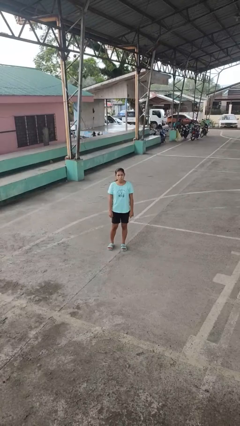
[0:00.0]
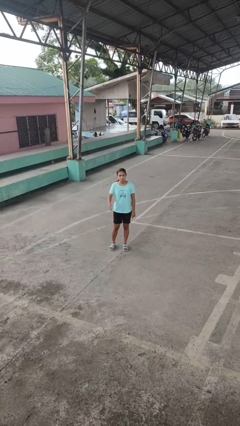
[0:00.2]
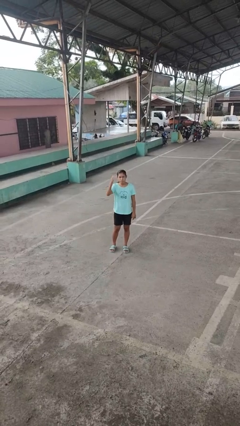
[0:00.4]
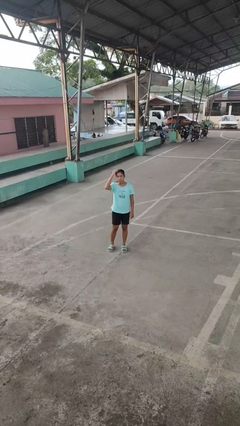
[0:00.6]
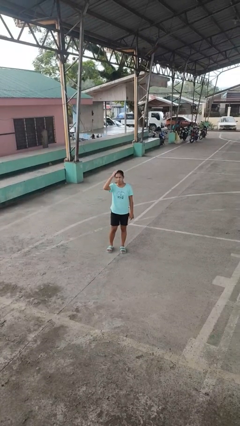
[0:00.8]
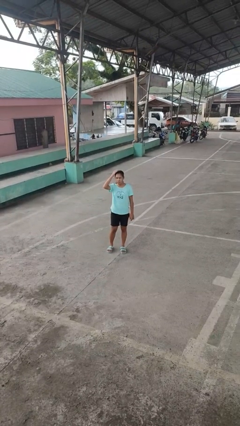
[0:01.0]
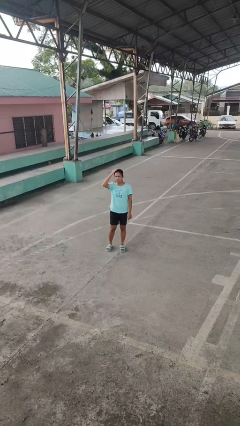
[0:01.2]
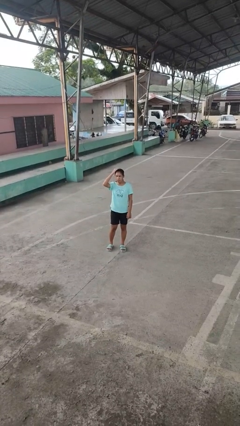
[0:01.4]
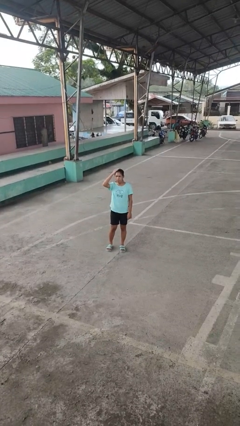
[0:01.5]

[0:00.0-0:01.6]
person pats head

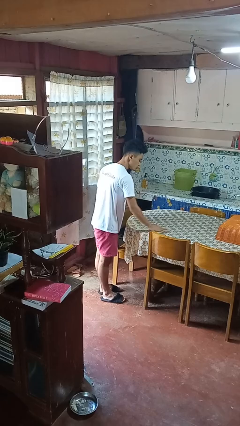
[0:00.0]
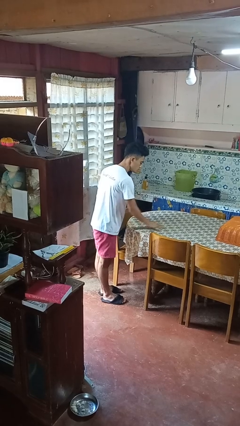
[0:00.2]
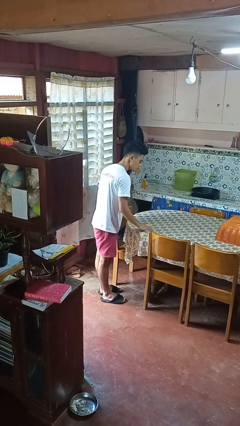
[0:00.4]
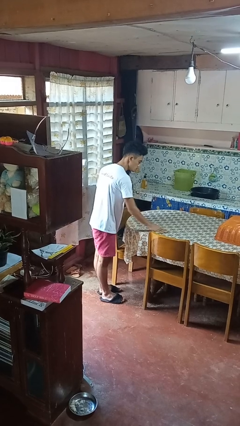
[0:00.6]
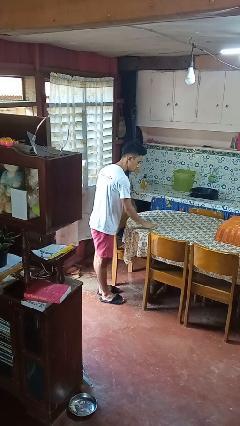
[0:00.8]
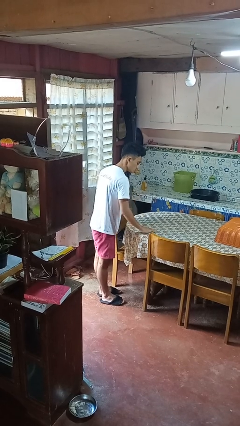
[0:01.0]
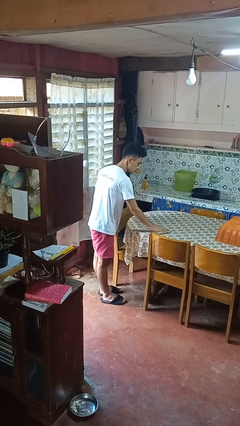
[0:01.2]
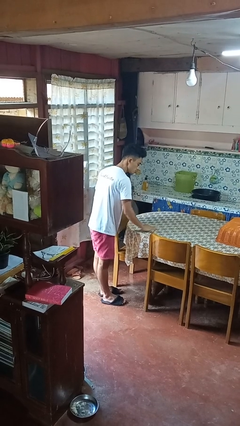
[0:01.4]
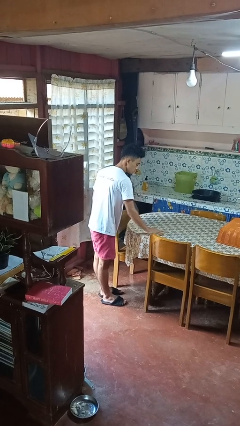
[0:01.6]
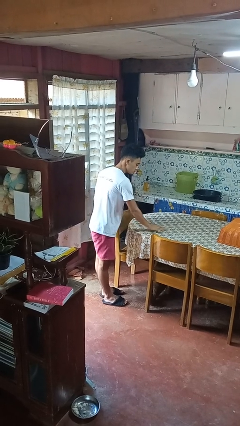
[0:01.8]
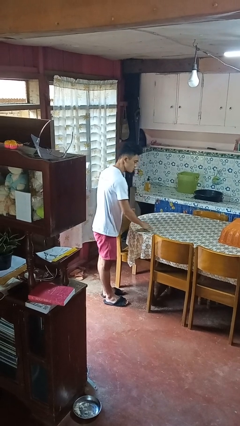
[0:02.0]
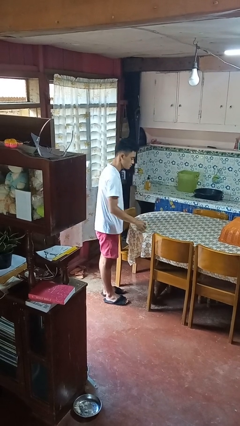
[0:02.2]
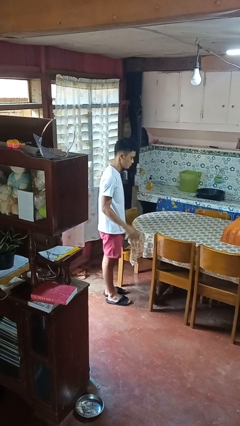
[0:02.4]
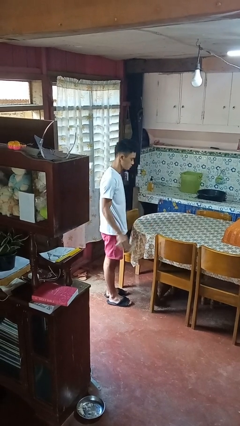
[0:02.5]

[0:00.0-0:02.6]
person cleans table with rag

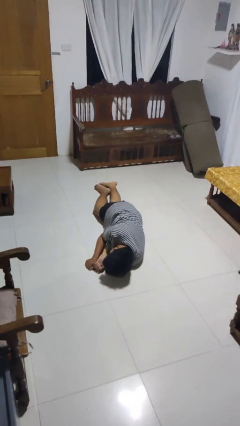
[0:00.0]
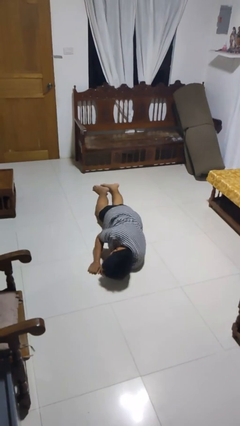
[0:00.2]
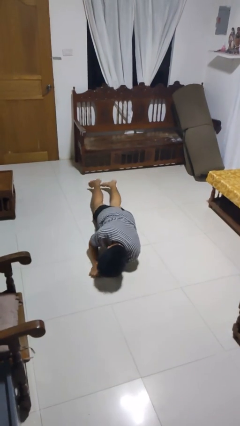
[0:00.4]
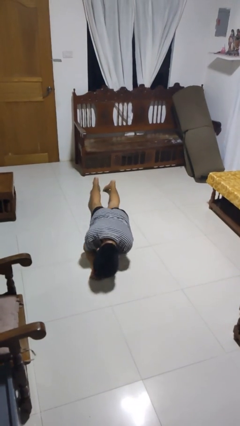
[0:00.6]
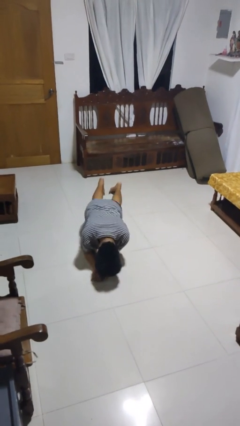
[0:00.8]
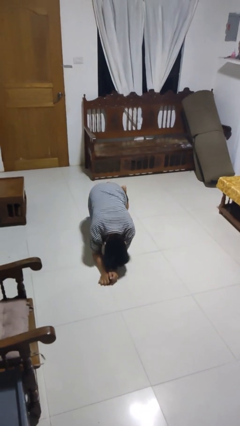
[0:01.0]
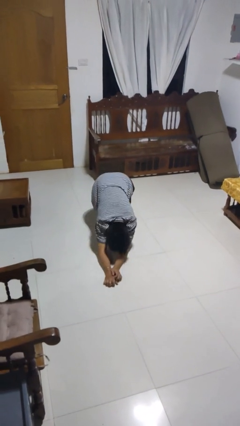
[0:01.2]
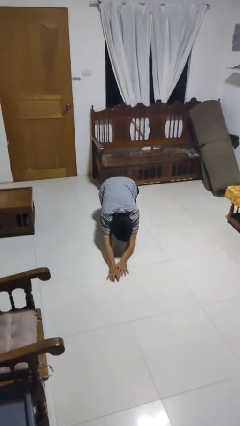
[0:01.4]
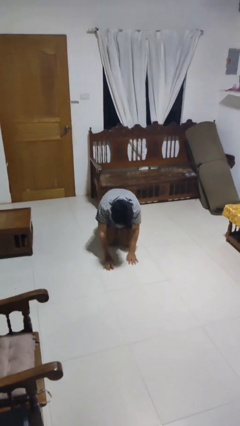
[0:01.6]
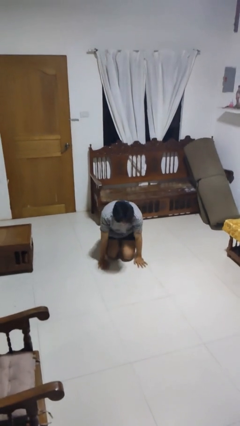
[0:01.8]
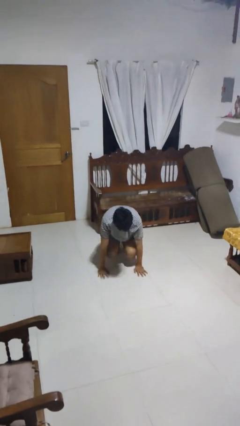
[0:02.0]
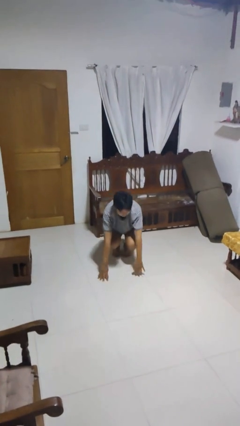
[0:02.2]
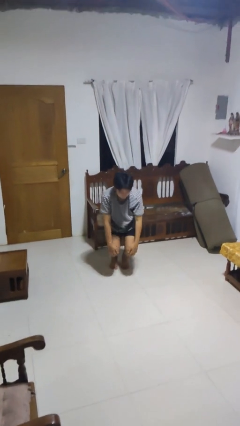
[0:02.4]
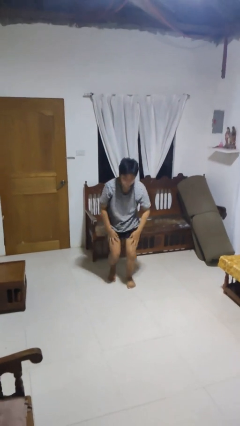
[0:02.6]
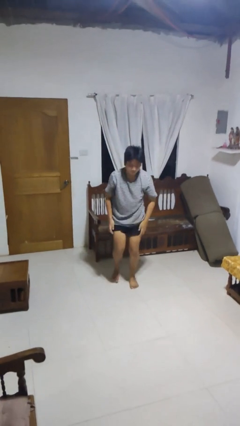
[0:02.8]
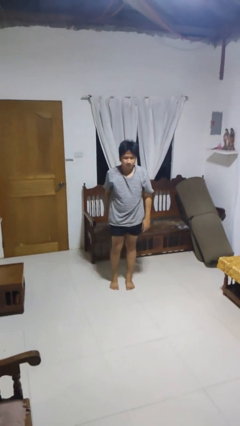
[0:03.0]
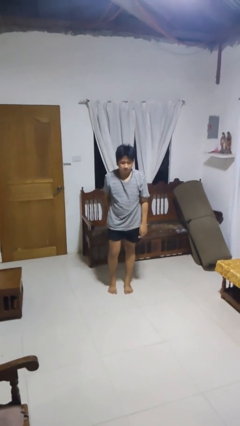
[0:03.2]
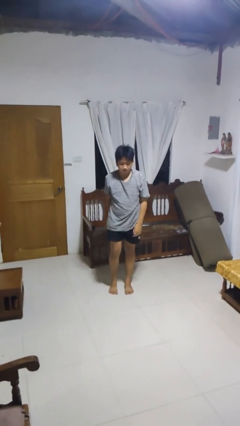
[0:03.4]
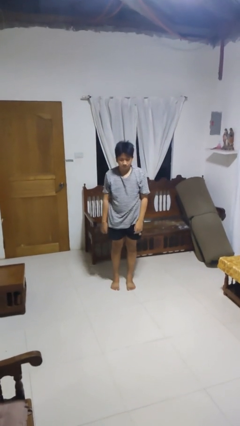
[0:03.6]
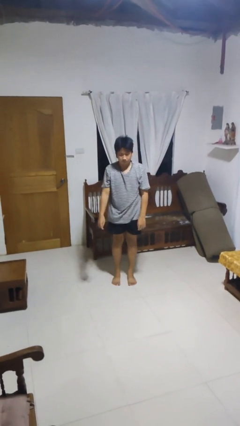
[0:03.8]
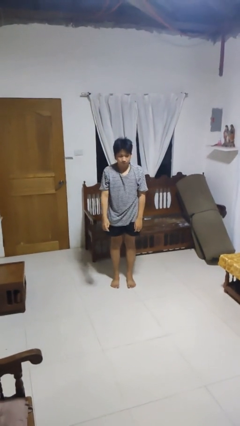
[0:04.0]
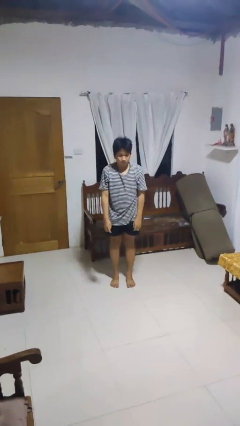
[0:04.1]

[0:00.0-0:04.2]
person stands up from floor

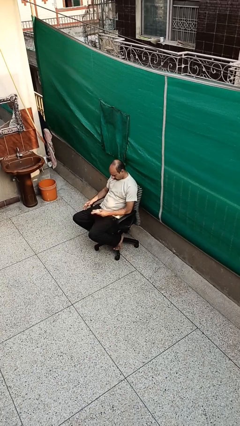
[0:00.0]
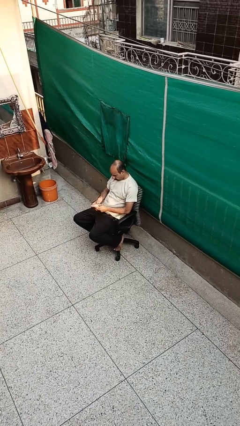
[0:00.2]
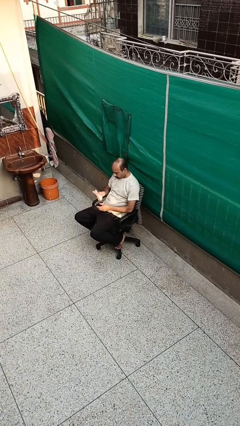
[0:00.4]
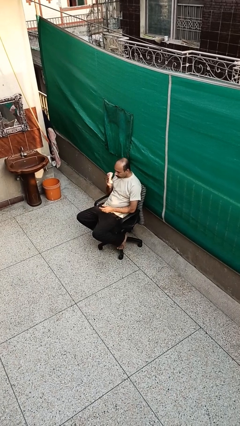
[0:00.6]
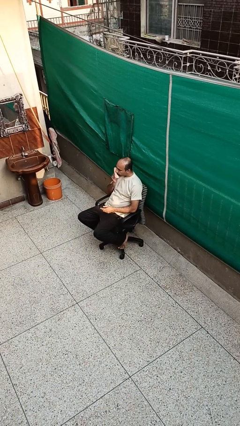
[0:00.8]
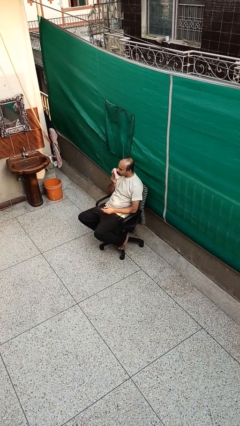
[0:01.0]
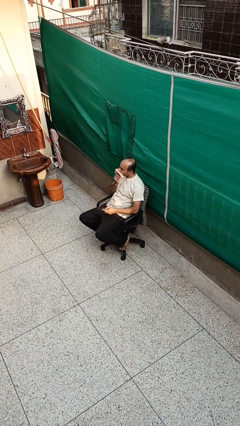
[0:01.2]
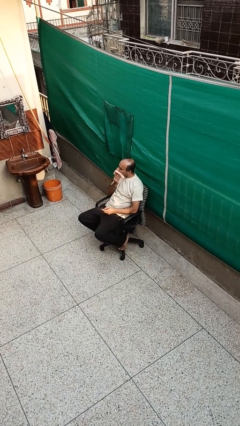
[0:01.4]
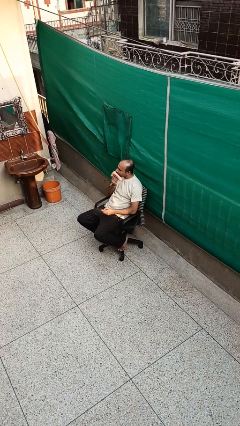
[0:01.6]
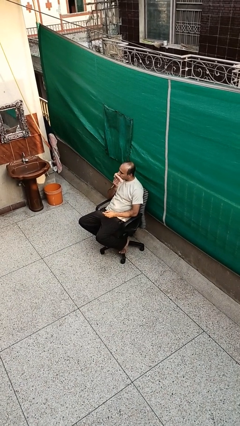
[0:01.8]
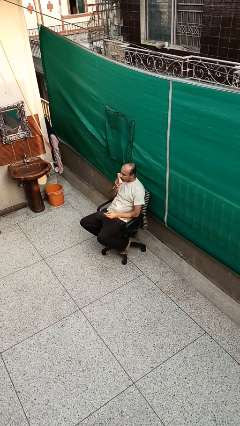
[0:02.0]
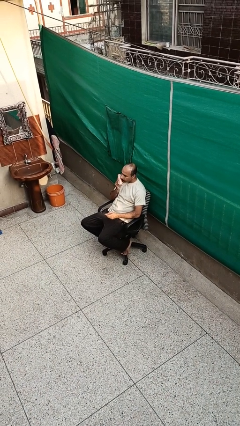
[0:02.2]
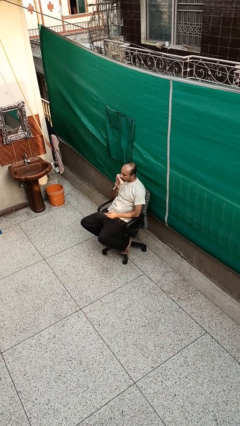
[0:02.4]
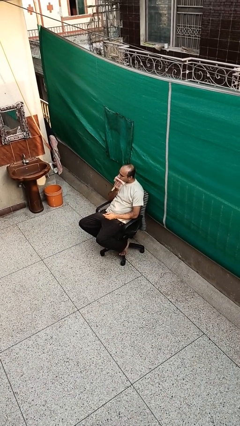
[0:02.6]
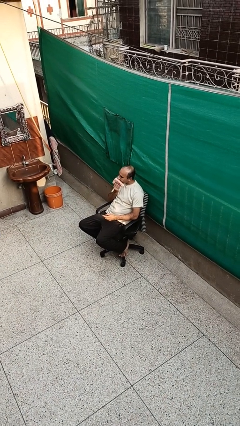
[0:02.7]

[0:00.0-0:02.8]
person wipes mouth with napkin

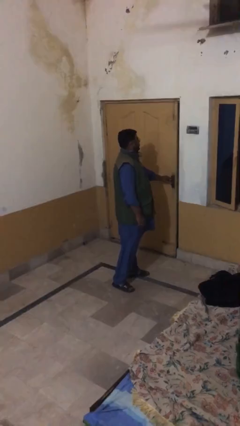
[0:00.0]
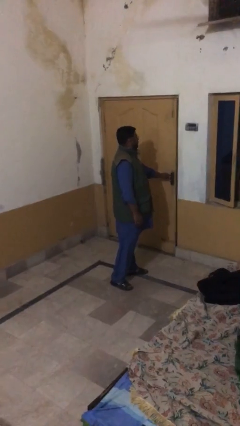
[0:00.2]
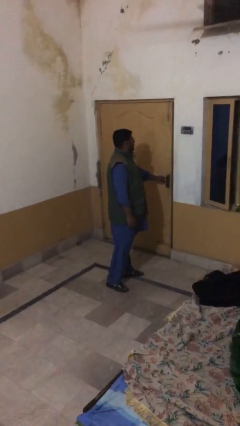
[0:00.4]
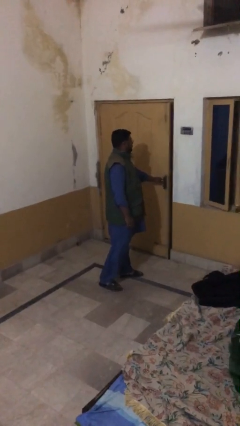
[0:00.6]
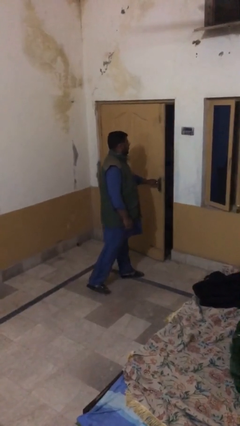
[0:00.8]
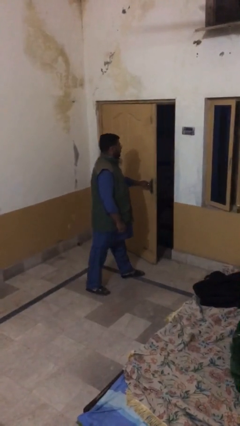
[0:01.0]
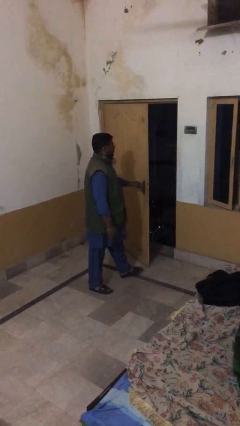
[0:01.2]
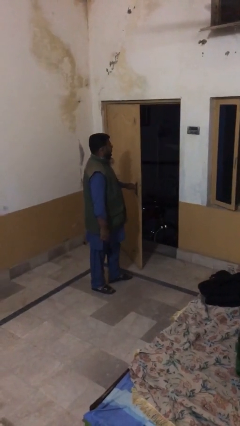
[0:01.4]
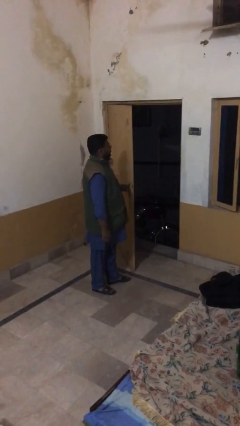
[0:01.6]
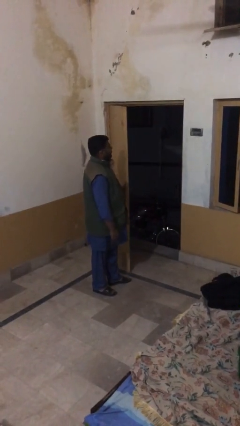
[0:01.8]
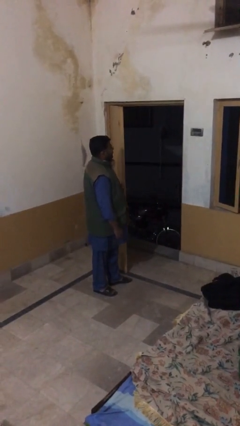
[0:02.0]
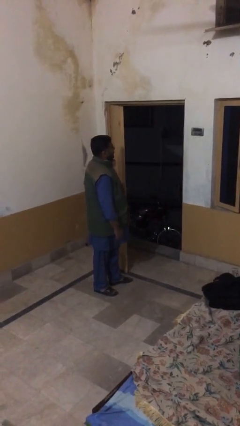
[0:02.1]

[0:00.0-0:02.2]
person opens facility door

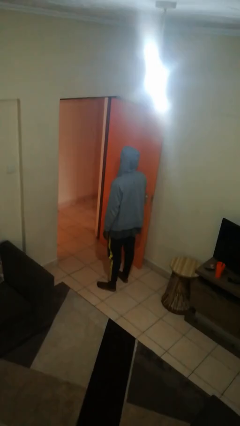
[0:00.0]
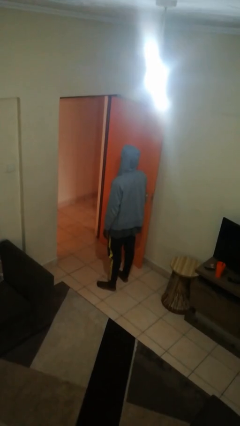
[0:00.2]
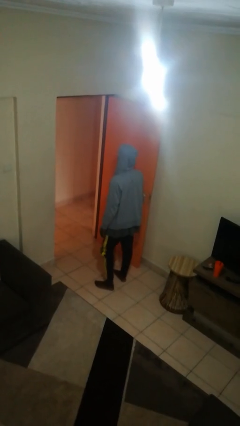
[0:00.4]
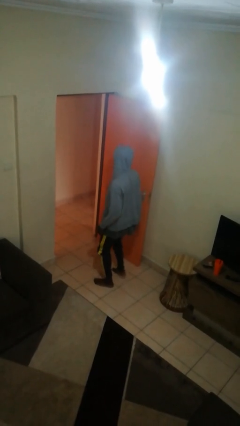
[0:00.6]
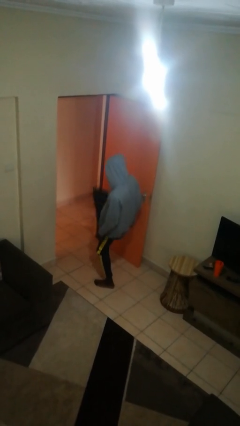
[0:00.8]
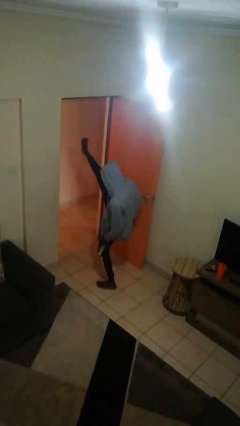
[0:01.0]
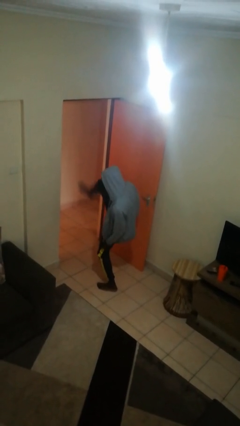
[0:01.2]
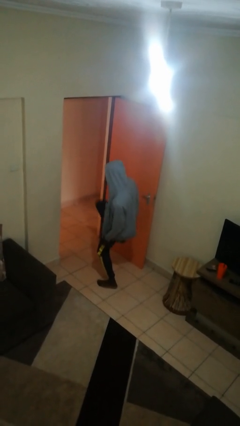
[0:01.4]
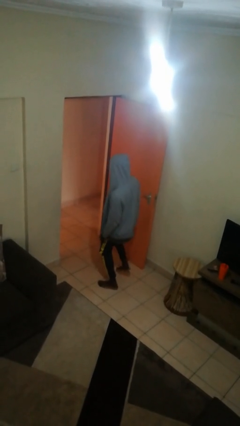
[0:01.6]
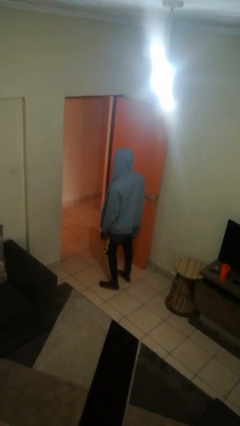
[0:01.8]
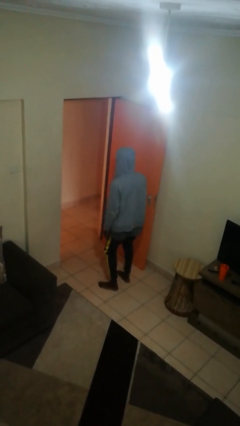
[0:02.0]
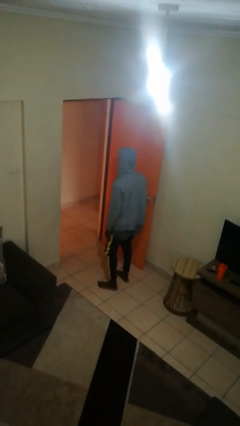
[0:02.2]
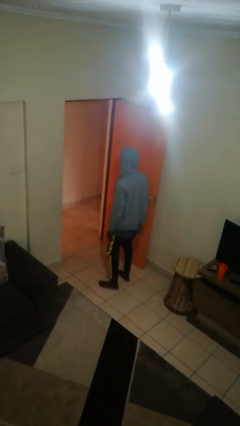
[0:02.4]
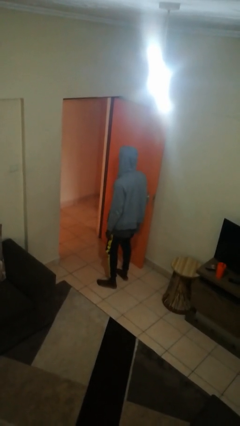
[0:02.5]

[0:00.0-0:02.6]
person karate kicks

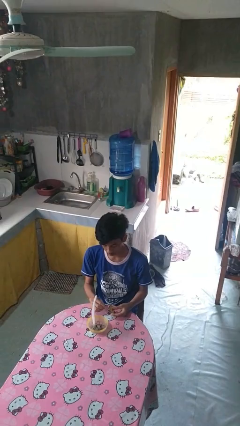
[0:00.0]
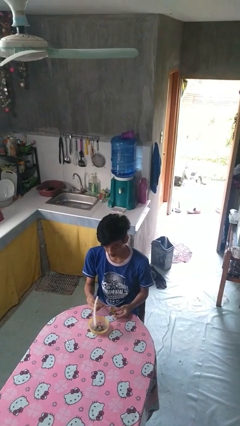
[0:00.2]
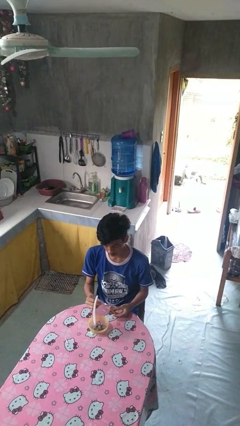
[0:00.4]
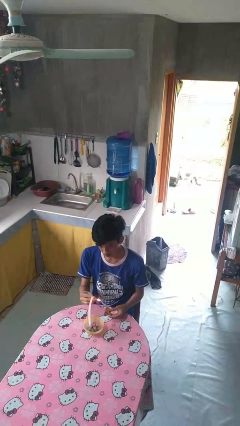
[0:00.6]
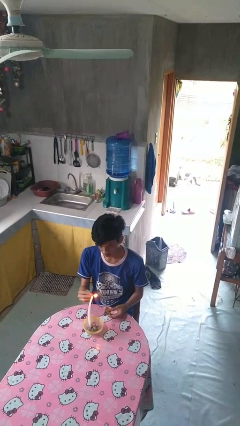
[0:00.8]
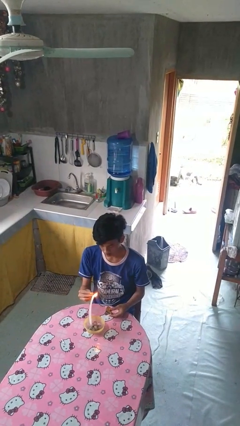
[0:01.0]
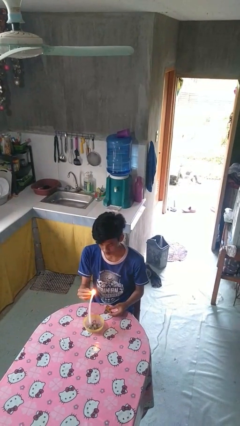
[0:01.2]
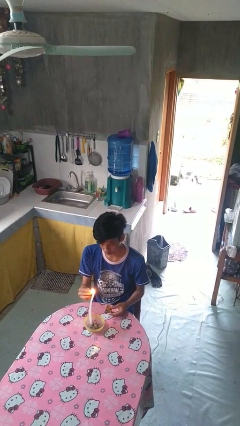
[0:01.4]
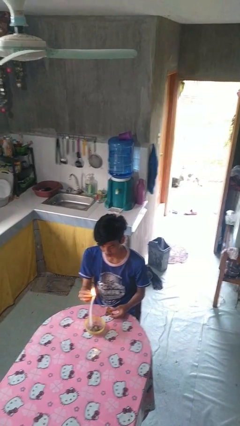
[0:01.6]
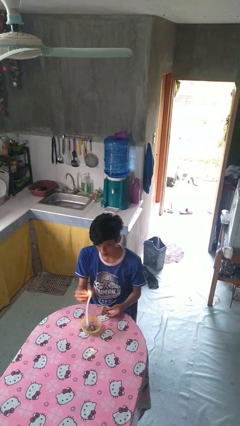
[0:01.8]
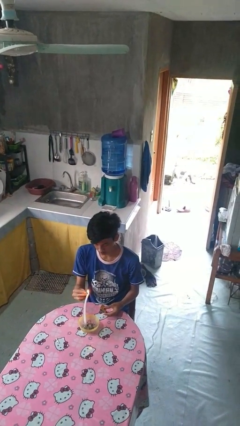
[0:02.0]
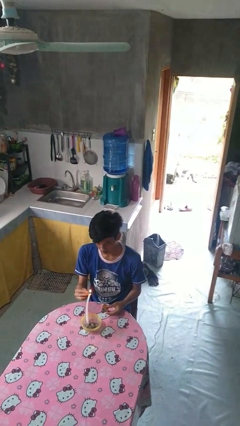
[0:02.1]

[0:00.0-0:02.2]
person lights candle
